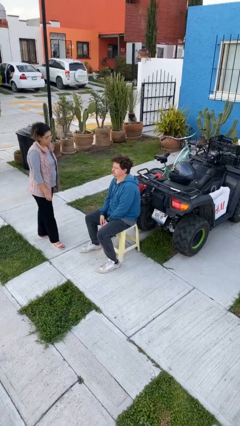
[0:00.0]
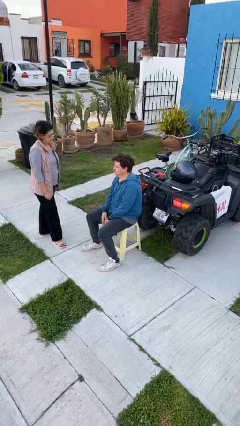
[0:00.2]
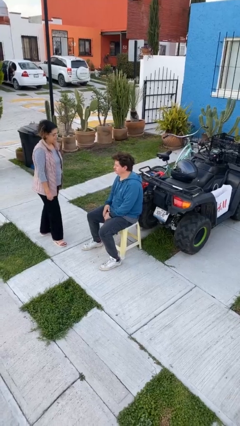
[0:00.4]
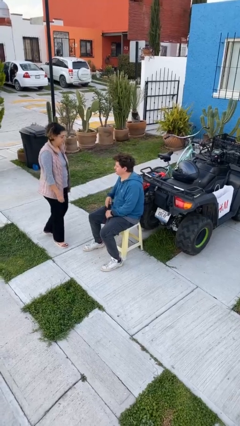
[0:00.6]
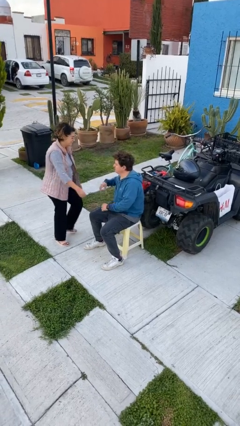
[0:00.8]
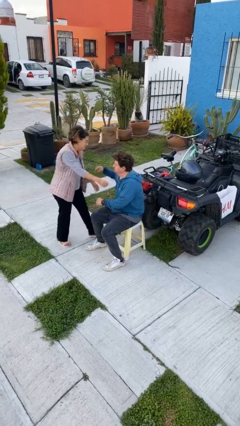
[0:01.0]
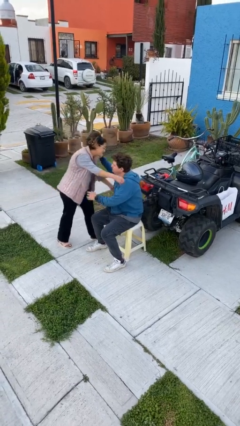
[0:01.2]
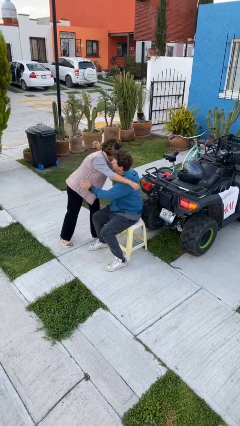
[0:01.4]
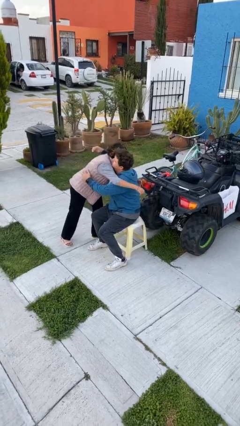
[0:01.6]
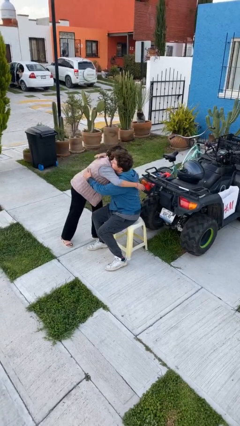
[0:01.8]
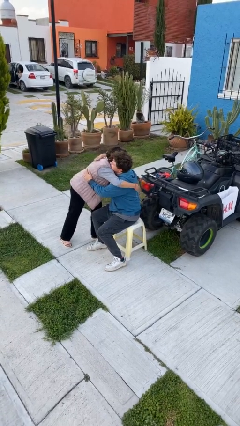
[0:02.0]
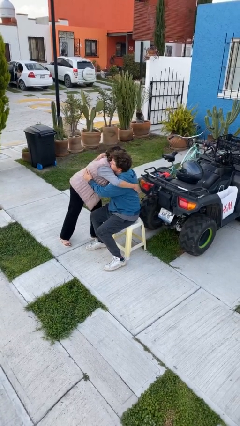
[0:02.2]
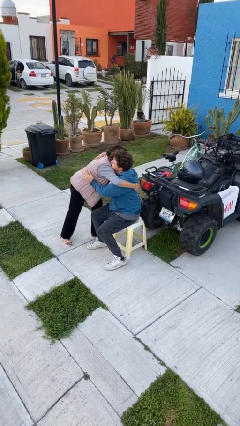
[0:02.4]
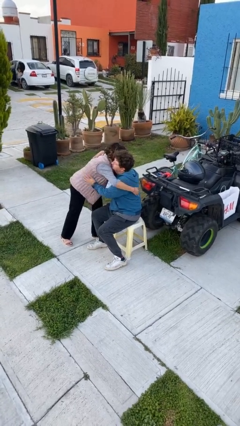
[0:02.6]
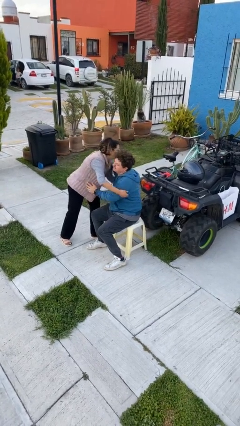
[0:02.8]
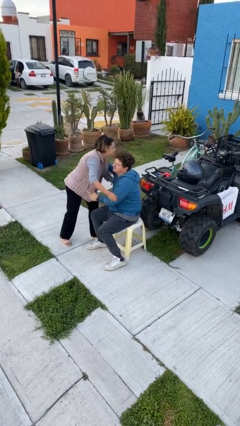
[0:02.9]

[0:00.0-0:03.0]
person embraces person

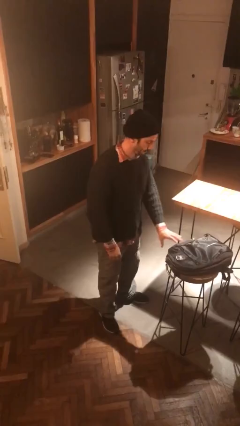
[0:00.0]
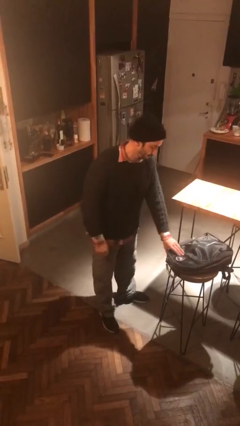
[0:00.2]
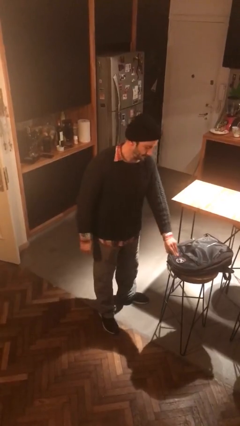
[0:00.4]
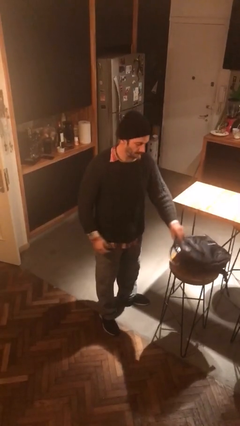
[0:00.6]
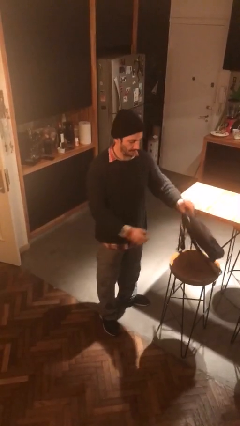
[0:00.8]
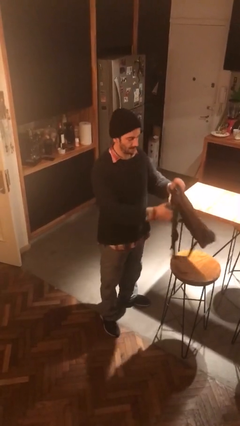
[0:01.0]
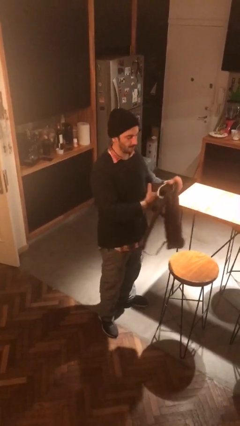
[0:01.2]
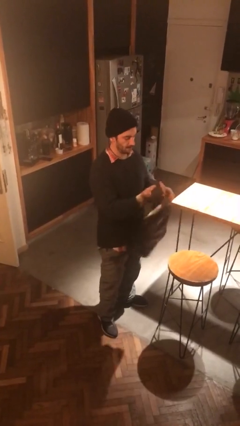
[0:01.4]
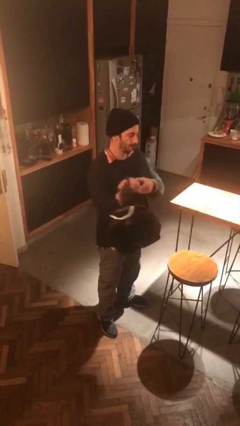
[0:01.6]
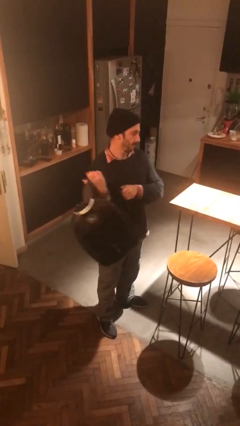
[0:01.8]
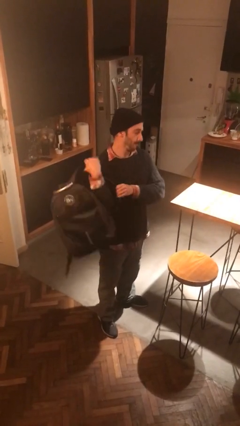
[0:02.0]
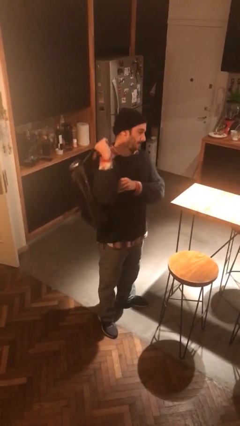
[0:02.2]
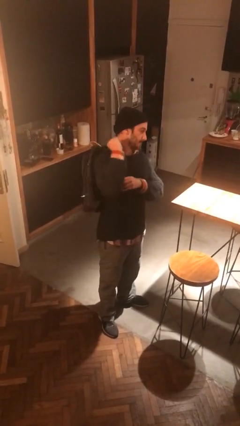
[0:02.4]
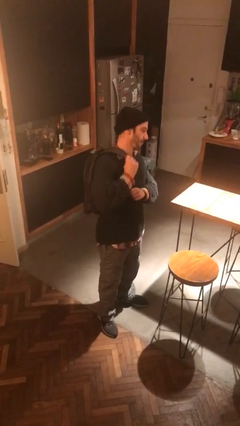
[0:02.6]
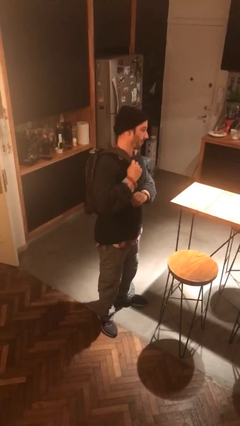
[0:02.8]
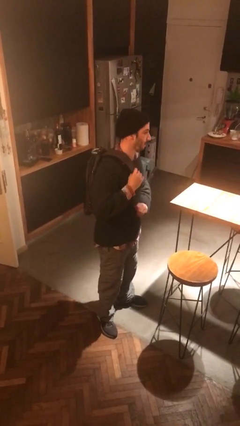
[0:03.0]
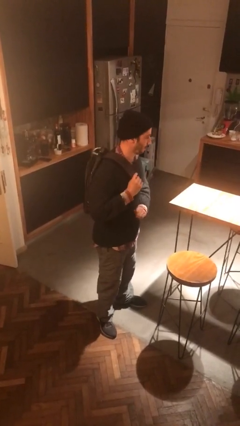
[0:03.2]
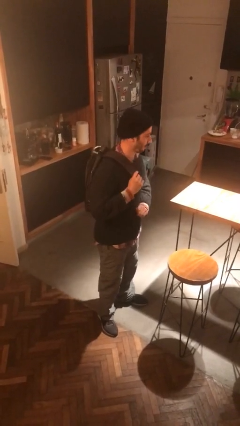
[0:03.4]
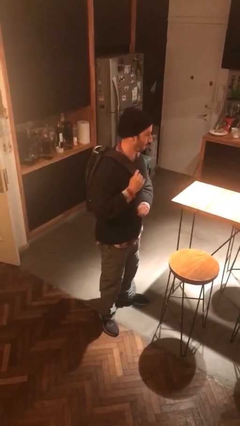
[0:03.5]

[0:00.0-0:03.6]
person puts on backpack

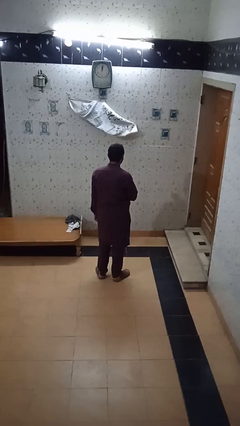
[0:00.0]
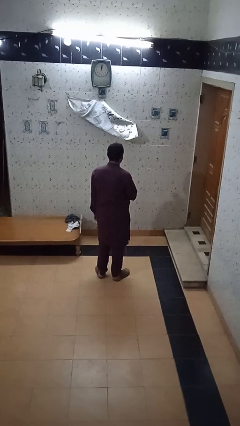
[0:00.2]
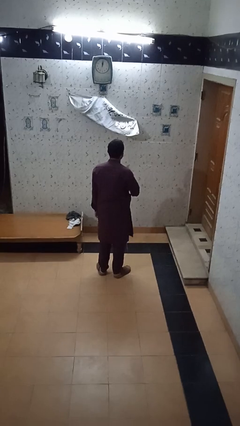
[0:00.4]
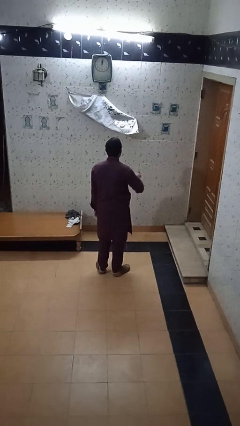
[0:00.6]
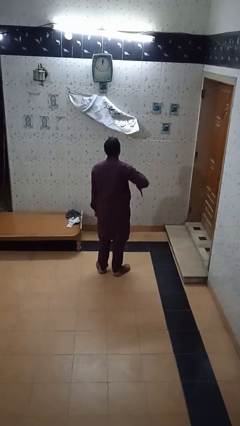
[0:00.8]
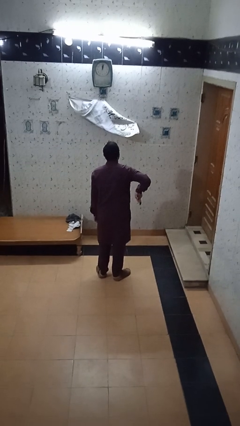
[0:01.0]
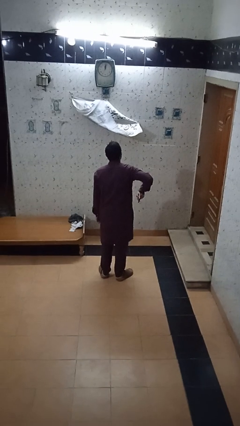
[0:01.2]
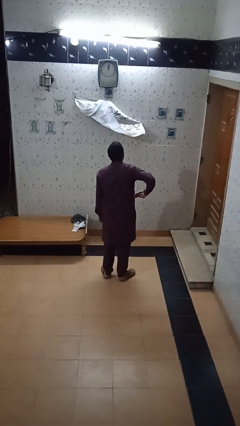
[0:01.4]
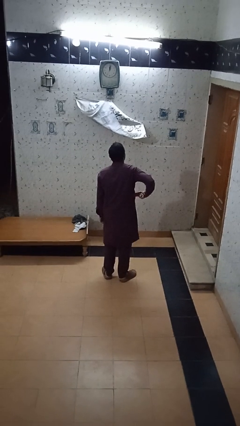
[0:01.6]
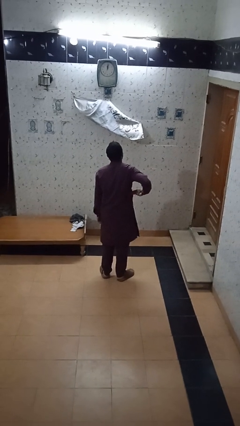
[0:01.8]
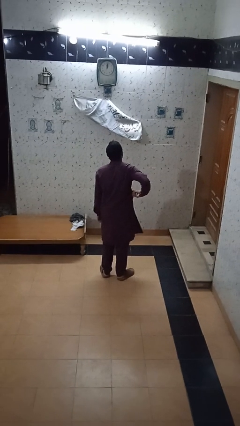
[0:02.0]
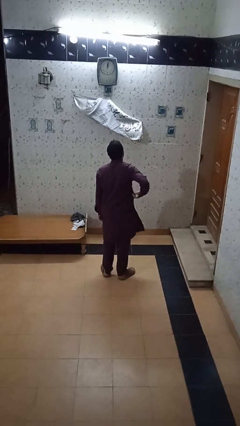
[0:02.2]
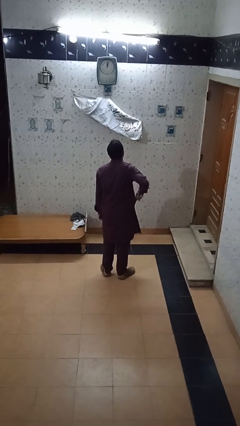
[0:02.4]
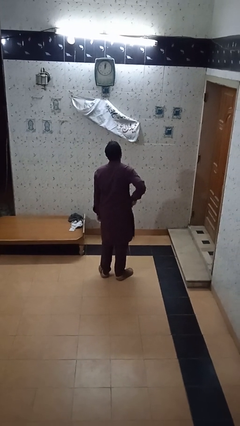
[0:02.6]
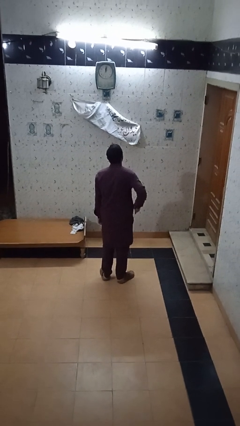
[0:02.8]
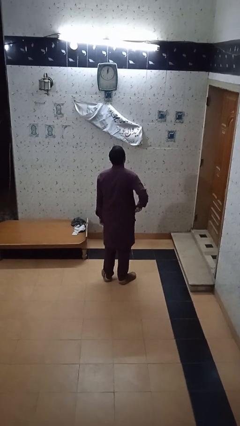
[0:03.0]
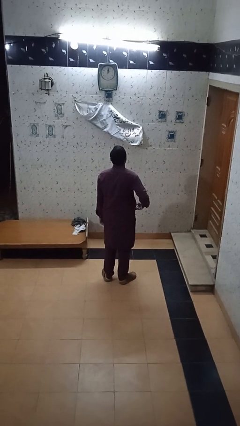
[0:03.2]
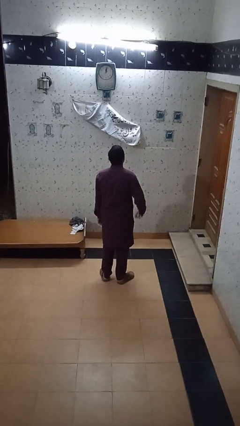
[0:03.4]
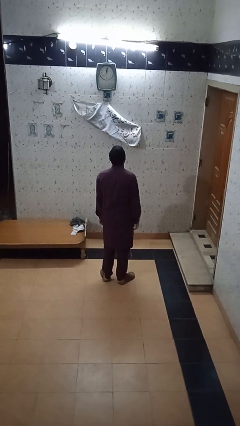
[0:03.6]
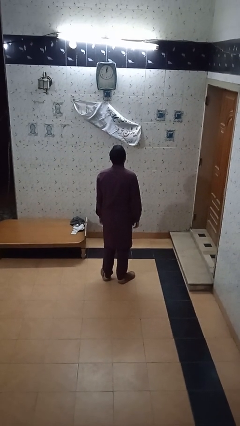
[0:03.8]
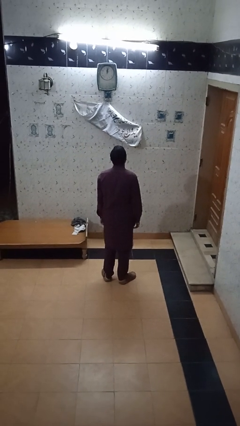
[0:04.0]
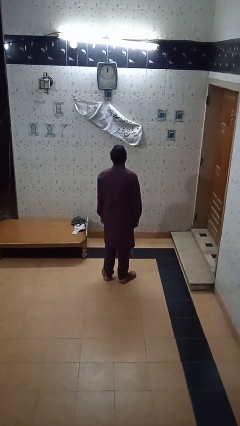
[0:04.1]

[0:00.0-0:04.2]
person puts phone into pocket

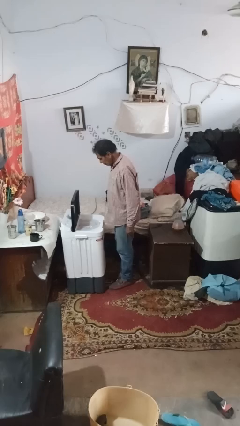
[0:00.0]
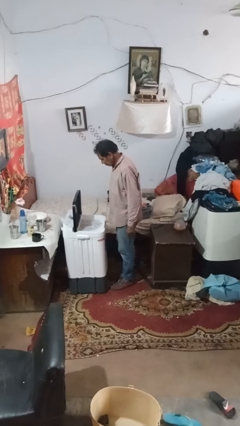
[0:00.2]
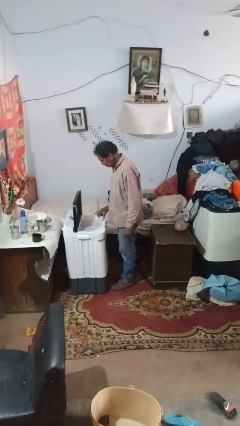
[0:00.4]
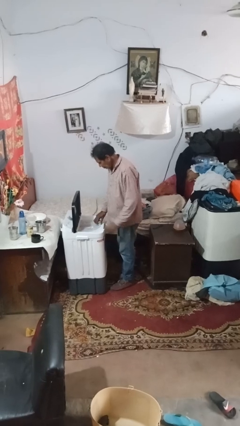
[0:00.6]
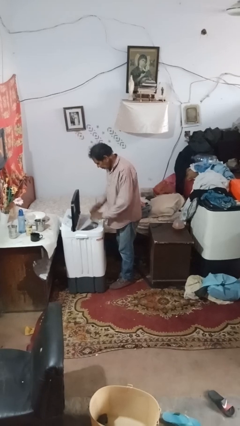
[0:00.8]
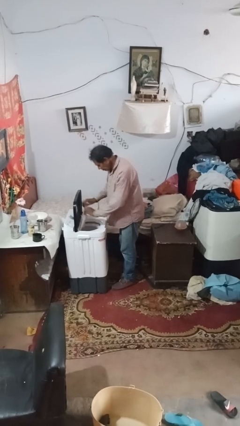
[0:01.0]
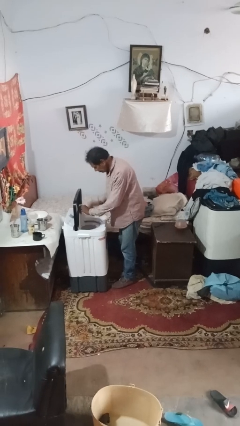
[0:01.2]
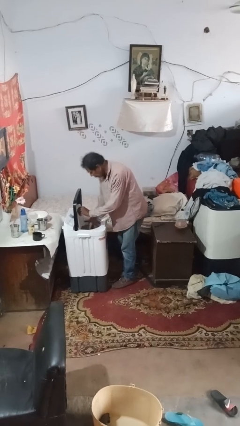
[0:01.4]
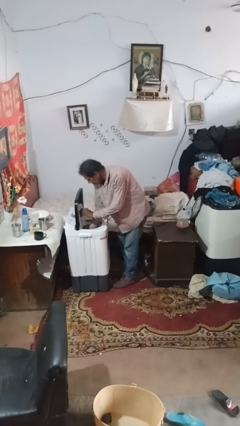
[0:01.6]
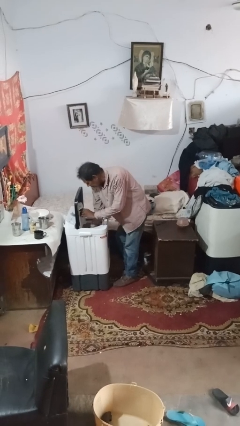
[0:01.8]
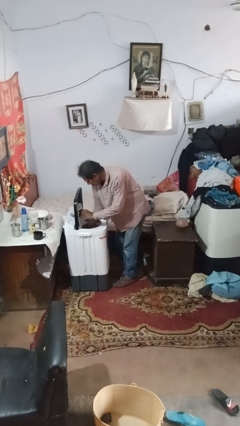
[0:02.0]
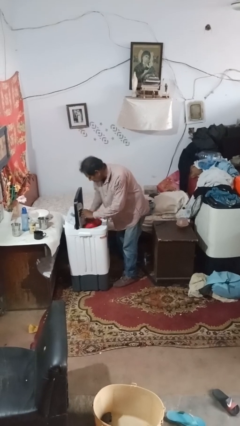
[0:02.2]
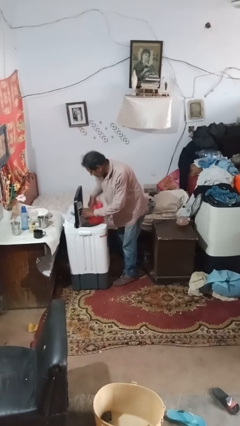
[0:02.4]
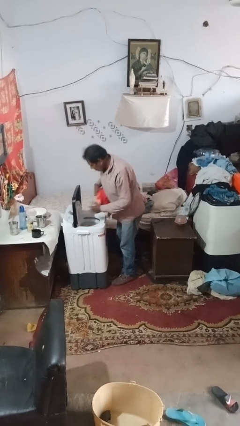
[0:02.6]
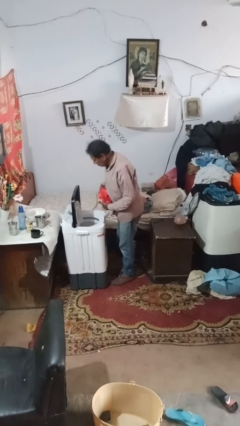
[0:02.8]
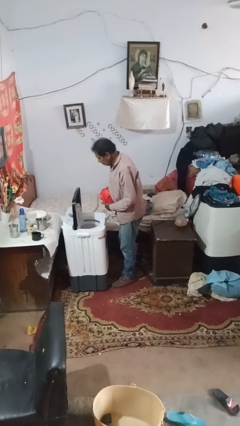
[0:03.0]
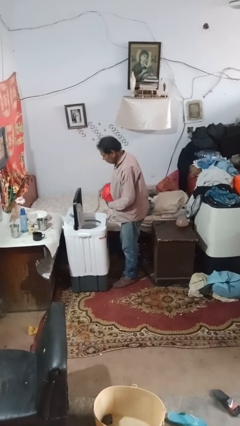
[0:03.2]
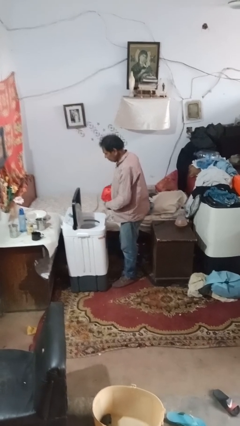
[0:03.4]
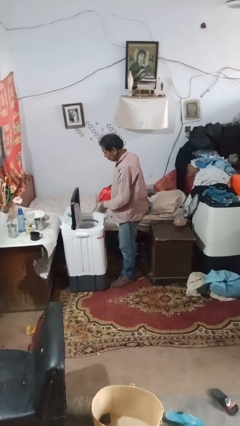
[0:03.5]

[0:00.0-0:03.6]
person unloads dryer

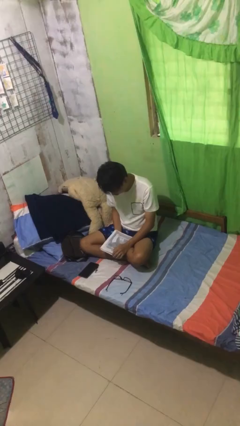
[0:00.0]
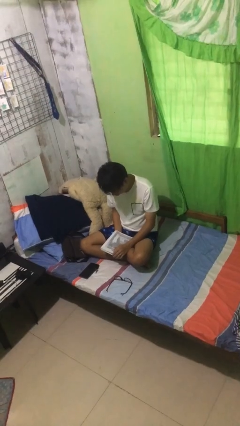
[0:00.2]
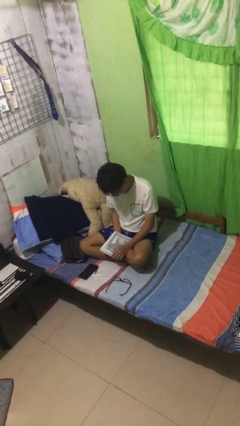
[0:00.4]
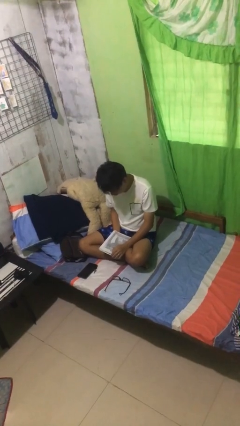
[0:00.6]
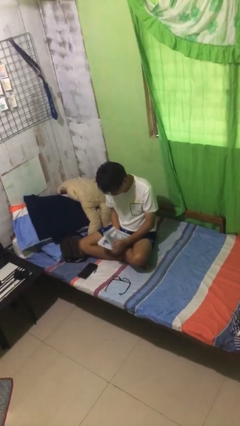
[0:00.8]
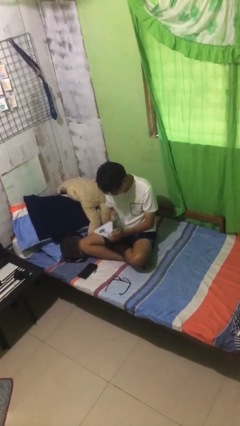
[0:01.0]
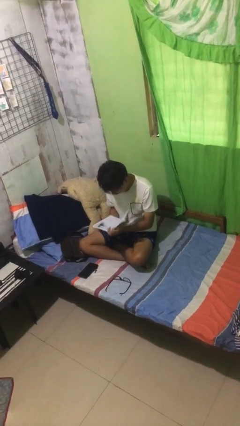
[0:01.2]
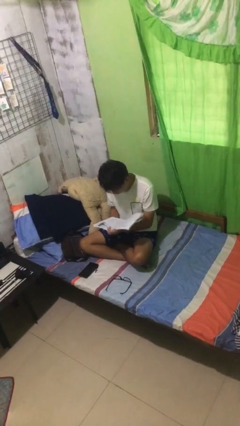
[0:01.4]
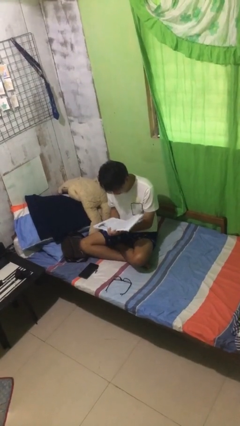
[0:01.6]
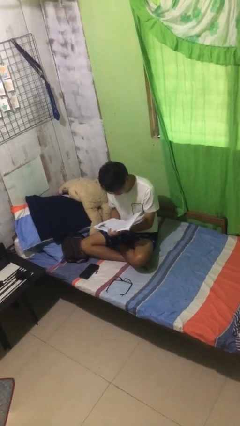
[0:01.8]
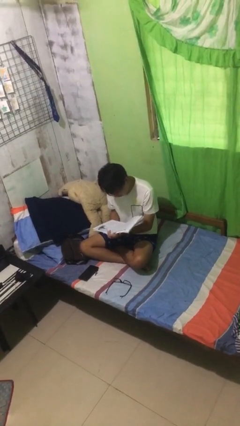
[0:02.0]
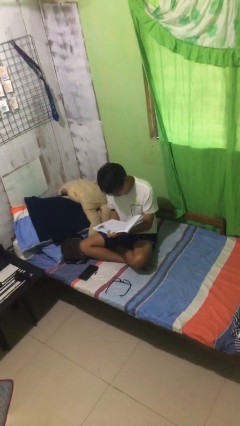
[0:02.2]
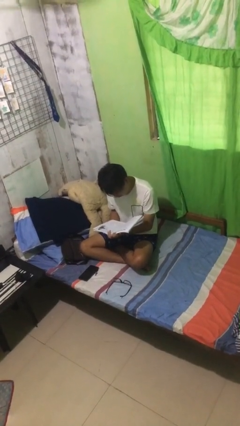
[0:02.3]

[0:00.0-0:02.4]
person reads document

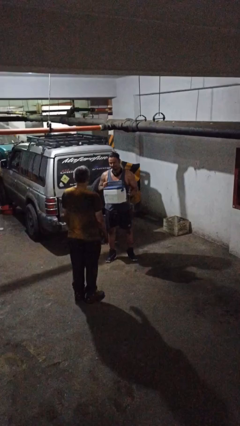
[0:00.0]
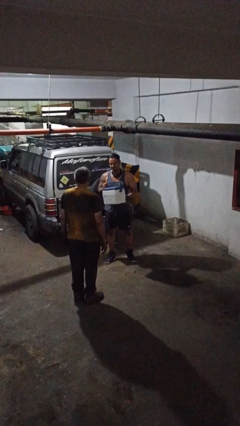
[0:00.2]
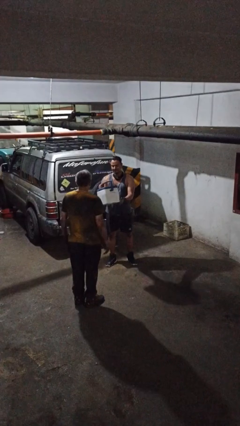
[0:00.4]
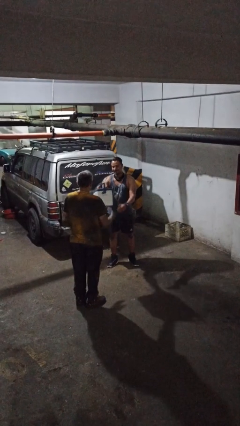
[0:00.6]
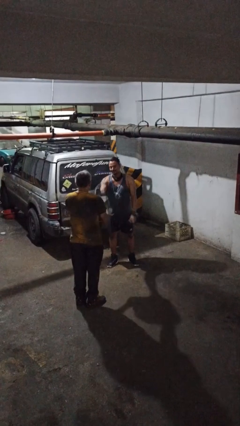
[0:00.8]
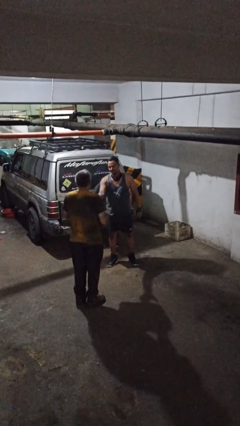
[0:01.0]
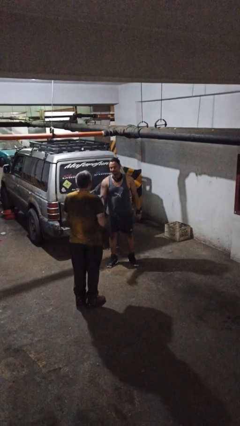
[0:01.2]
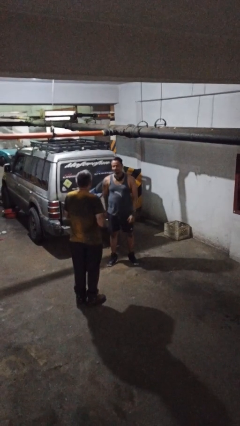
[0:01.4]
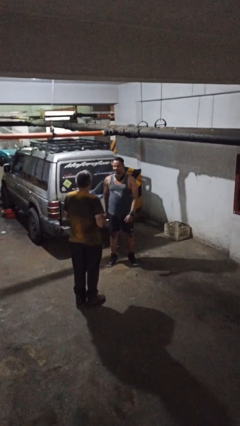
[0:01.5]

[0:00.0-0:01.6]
person transfers object to person
